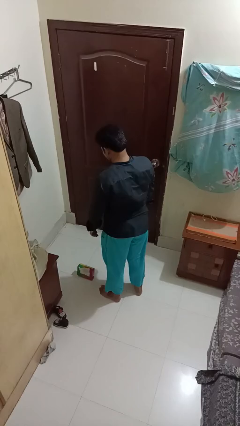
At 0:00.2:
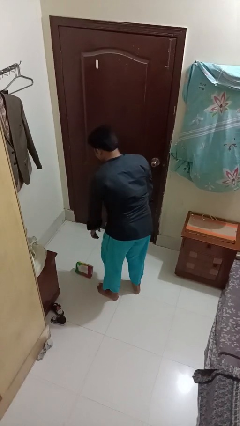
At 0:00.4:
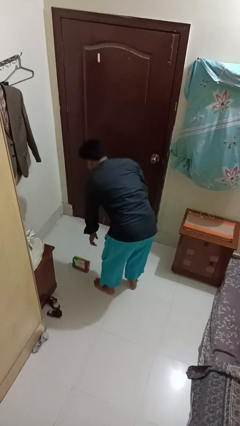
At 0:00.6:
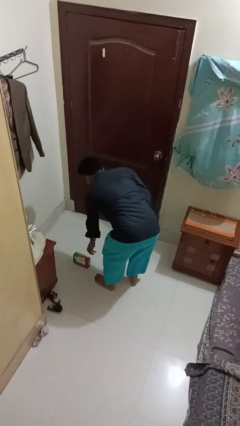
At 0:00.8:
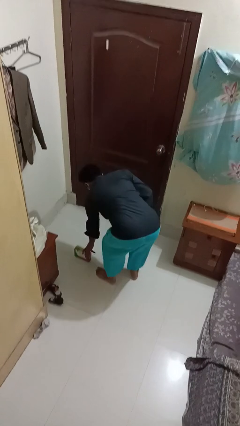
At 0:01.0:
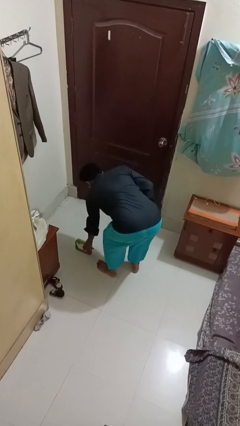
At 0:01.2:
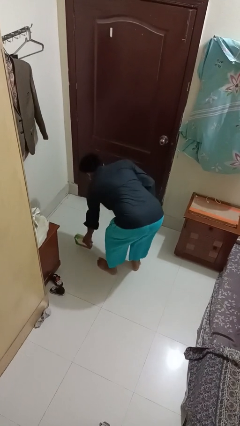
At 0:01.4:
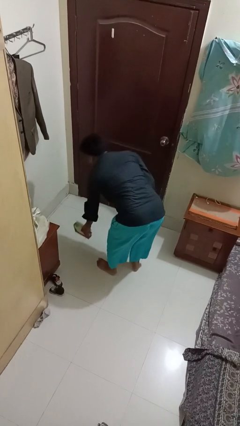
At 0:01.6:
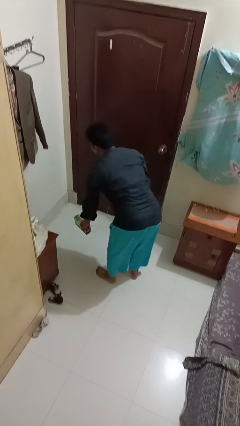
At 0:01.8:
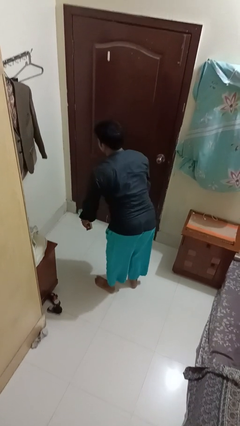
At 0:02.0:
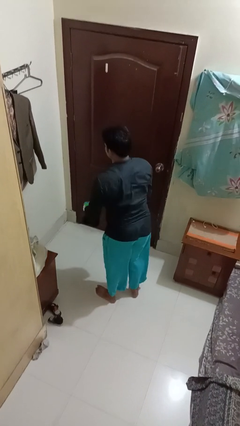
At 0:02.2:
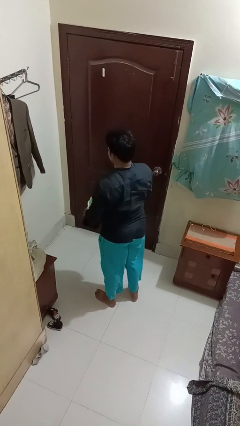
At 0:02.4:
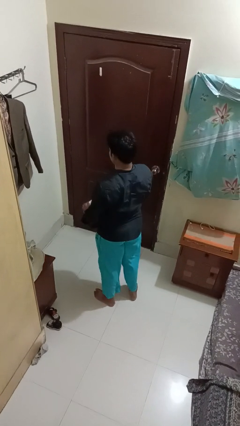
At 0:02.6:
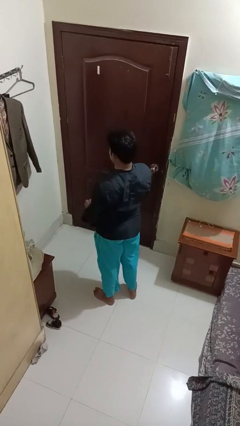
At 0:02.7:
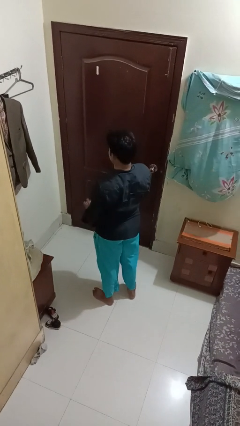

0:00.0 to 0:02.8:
person picks up object from floor

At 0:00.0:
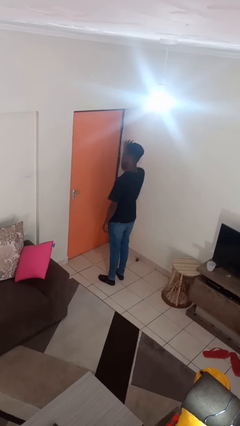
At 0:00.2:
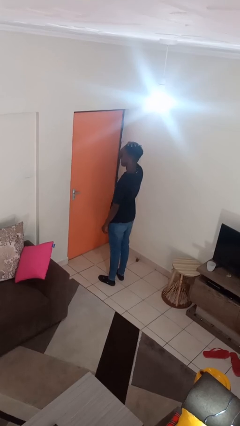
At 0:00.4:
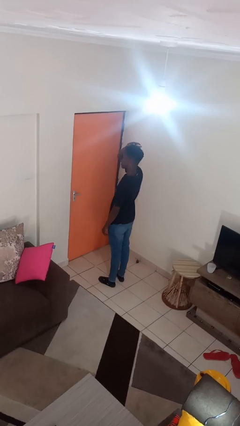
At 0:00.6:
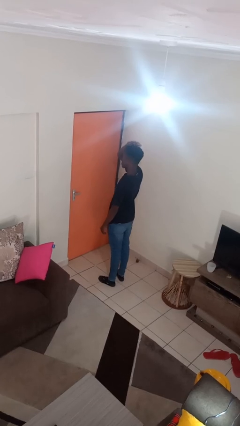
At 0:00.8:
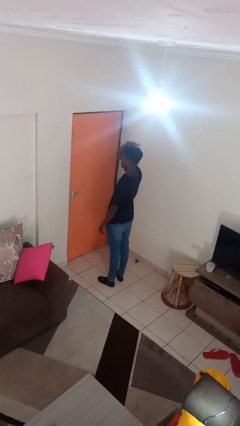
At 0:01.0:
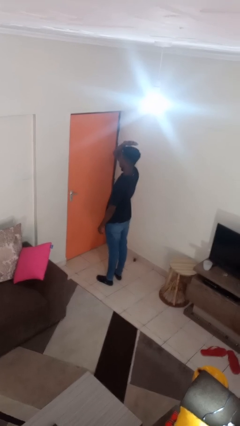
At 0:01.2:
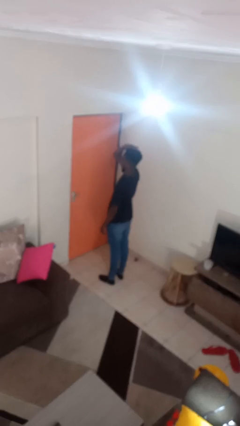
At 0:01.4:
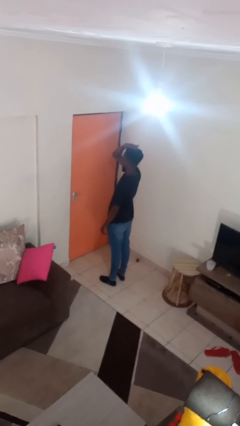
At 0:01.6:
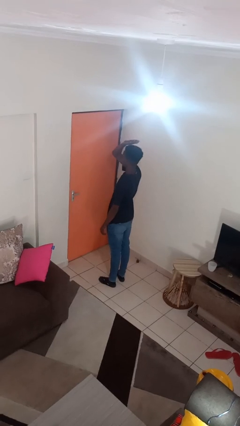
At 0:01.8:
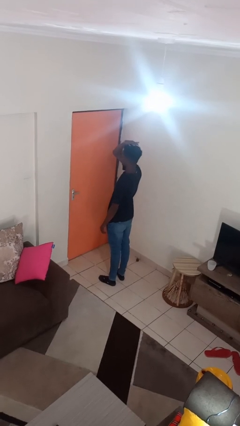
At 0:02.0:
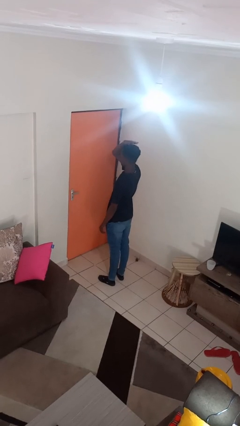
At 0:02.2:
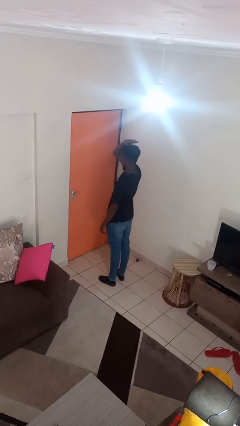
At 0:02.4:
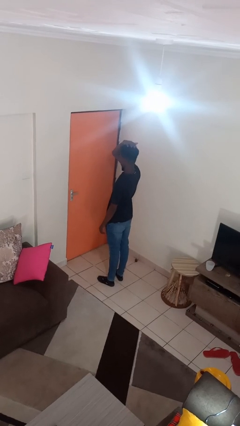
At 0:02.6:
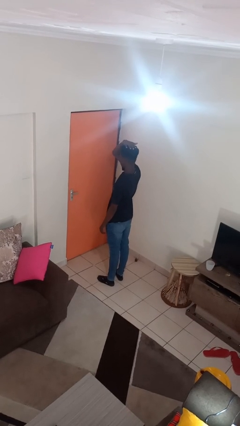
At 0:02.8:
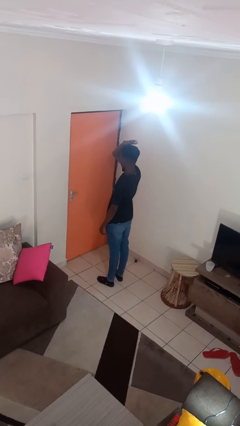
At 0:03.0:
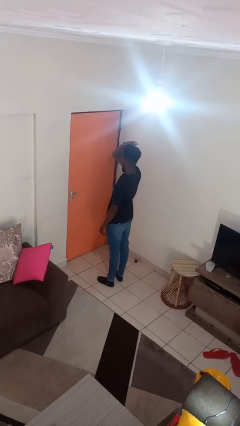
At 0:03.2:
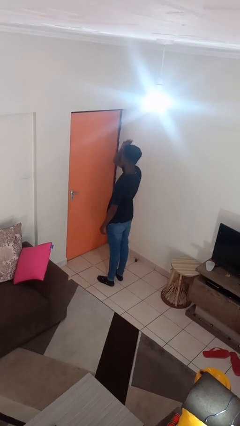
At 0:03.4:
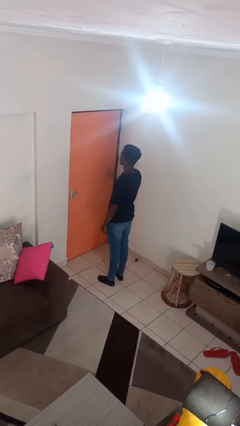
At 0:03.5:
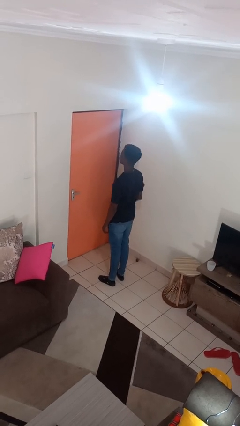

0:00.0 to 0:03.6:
person pats head

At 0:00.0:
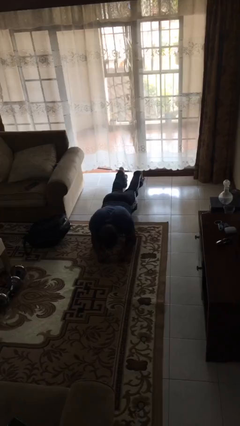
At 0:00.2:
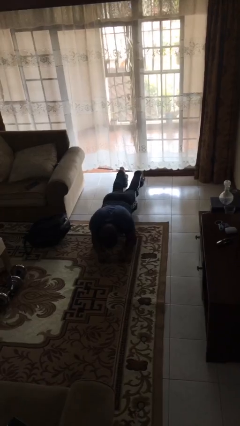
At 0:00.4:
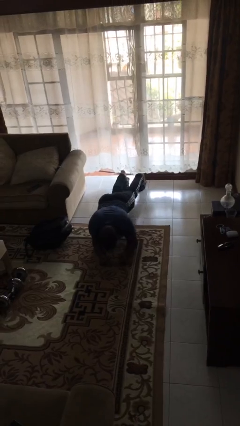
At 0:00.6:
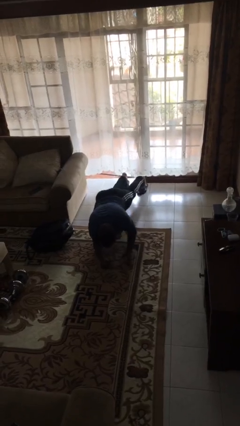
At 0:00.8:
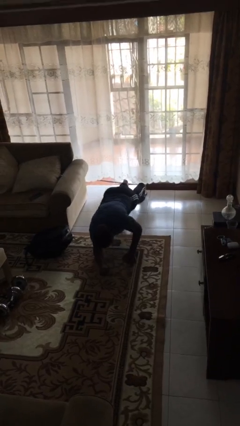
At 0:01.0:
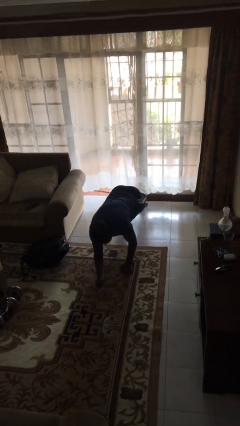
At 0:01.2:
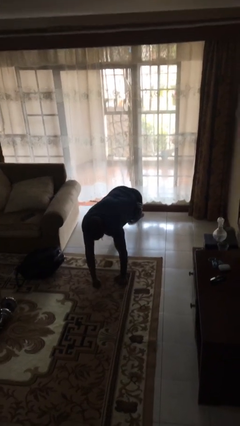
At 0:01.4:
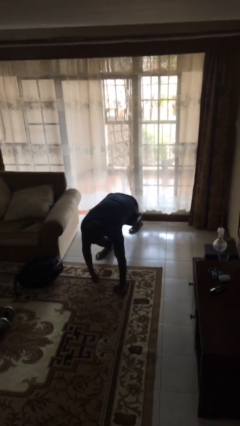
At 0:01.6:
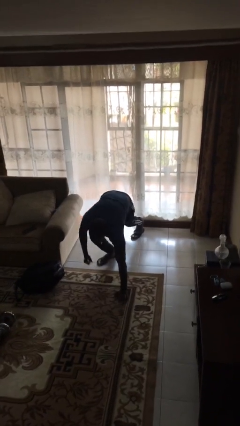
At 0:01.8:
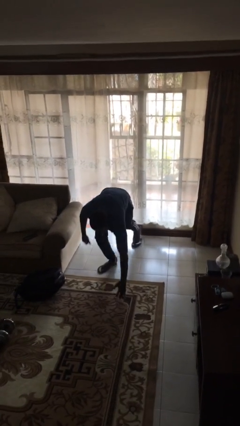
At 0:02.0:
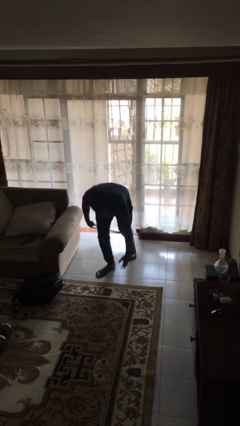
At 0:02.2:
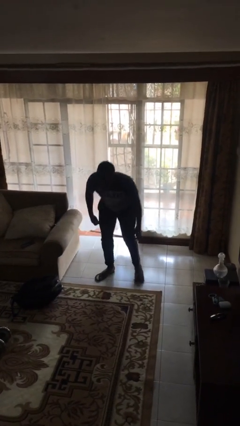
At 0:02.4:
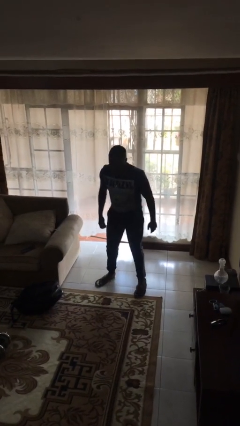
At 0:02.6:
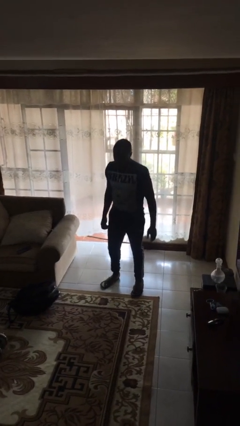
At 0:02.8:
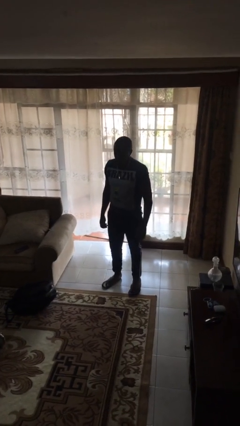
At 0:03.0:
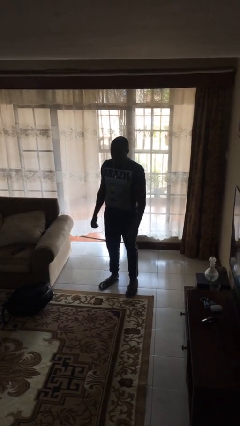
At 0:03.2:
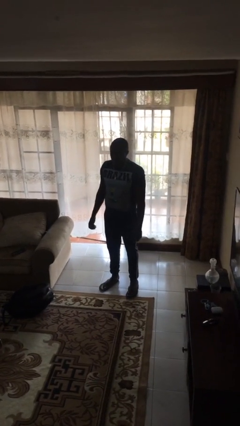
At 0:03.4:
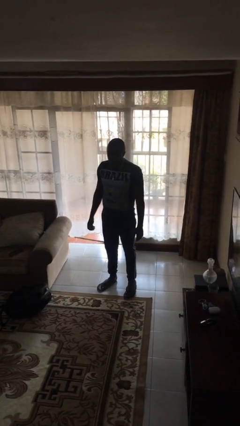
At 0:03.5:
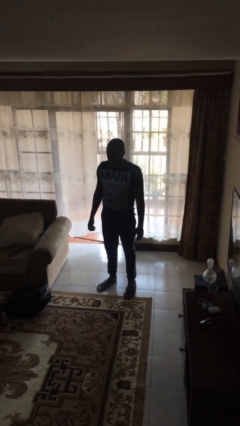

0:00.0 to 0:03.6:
person stands up from floor

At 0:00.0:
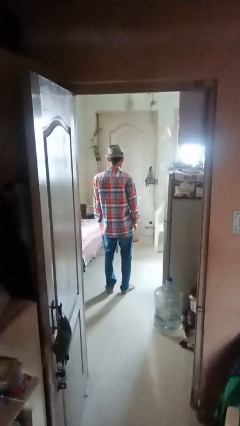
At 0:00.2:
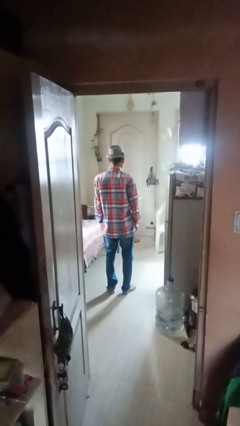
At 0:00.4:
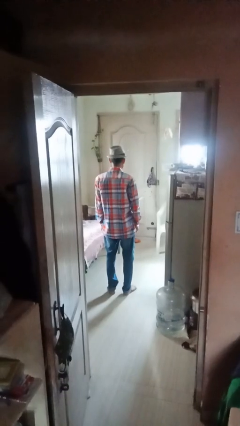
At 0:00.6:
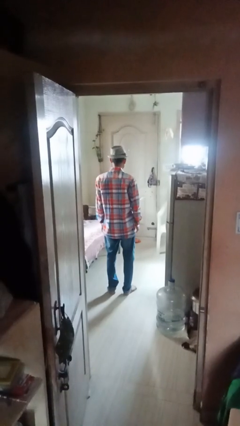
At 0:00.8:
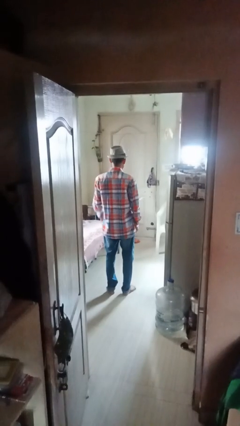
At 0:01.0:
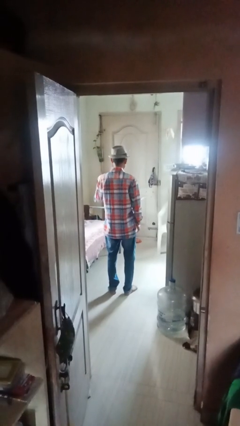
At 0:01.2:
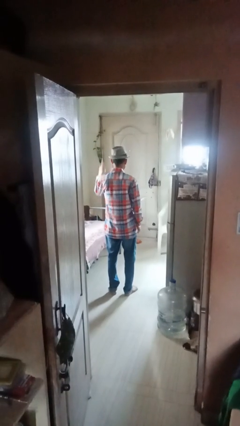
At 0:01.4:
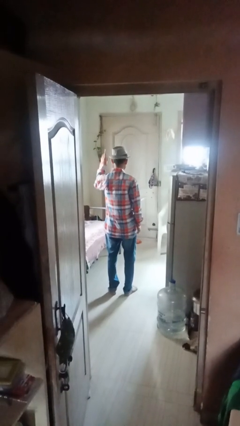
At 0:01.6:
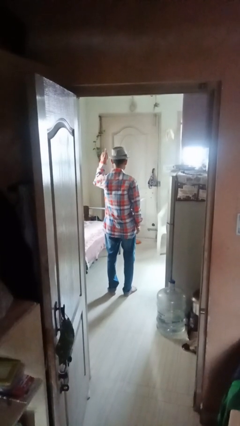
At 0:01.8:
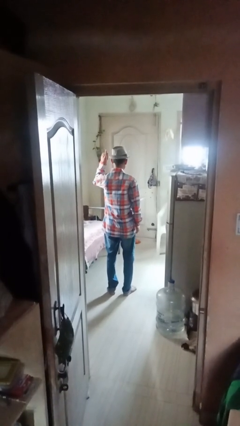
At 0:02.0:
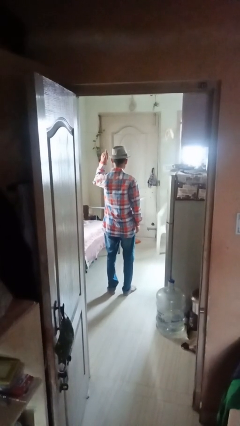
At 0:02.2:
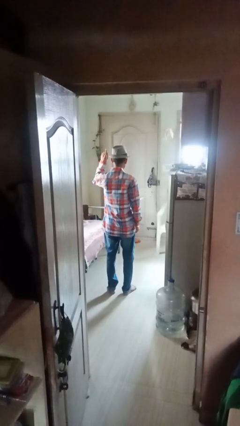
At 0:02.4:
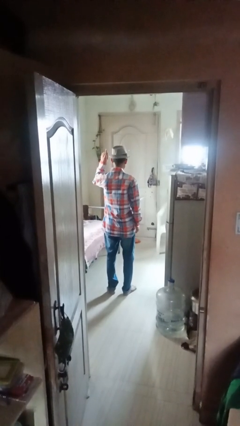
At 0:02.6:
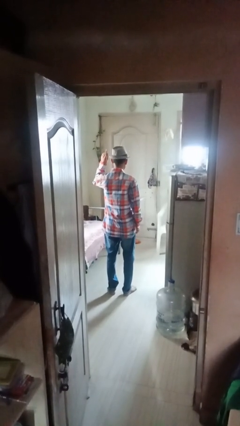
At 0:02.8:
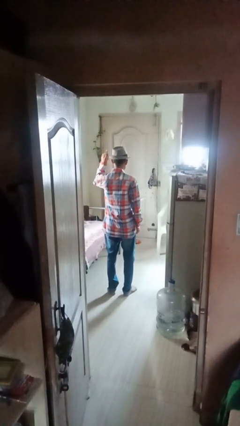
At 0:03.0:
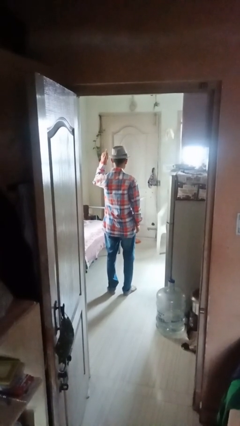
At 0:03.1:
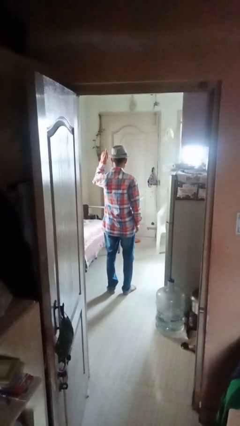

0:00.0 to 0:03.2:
person gestures number one

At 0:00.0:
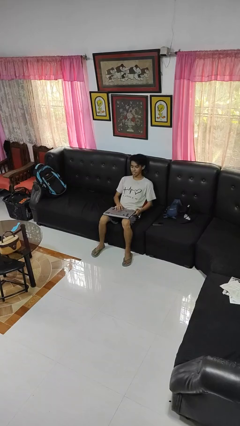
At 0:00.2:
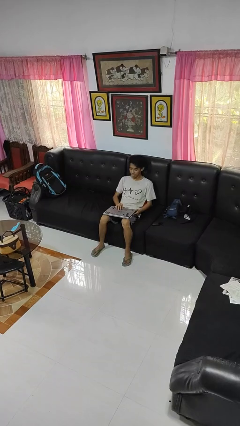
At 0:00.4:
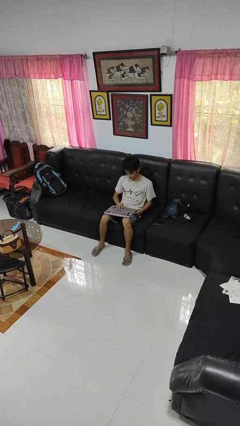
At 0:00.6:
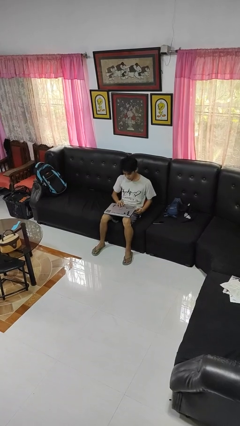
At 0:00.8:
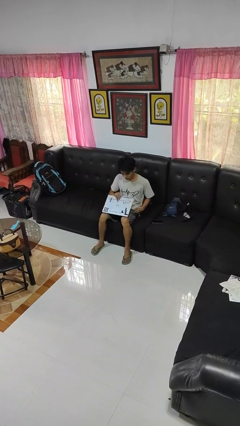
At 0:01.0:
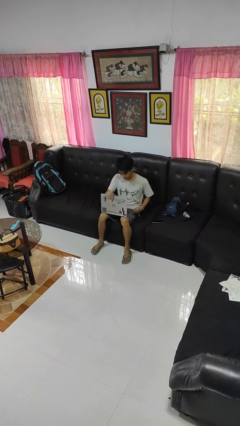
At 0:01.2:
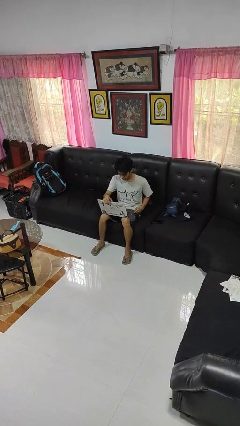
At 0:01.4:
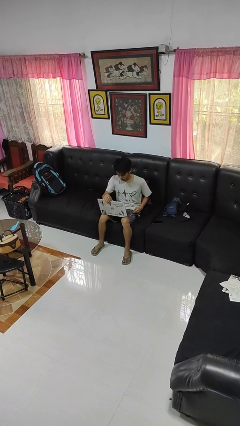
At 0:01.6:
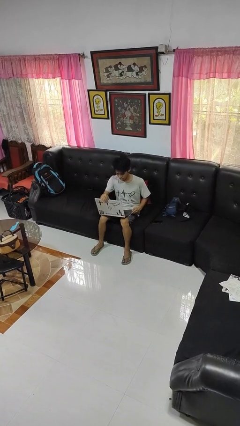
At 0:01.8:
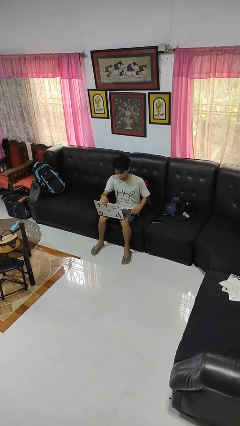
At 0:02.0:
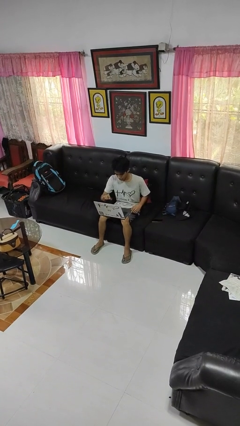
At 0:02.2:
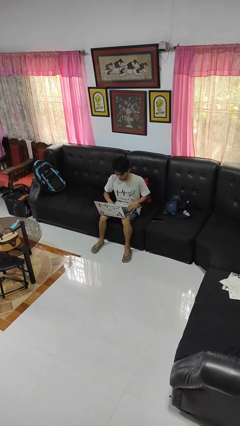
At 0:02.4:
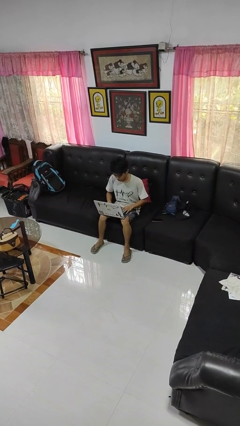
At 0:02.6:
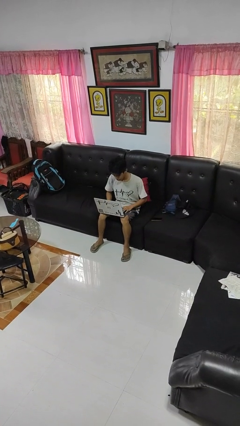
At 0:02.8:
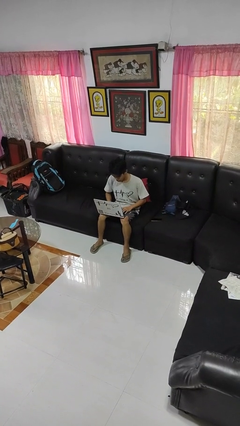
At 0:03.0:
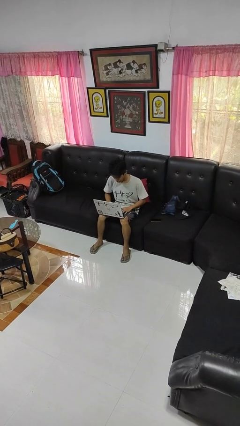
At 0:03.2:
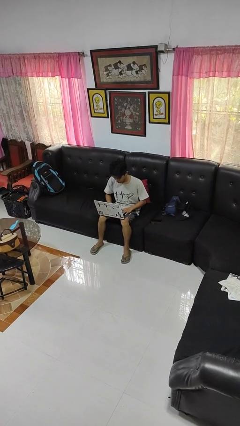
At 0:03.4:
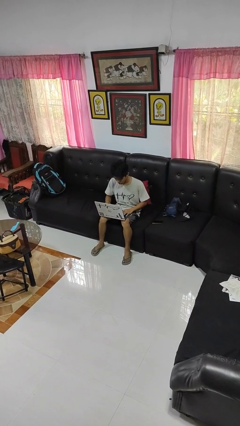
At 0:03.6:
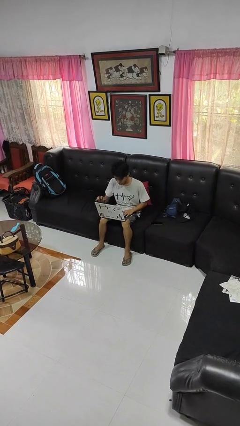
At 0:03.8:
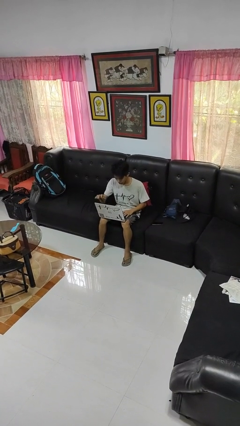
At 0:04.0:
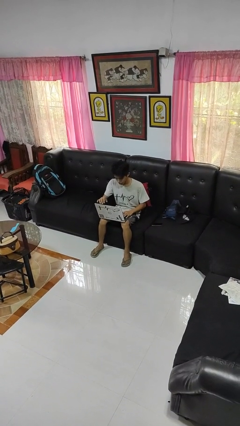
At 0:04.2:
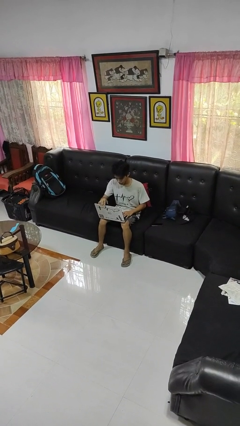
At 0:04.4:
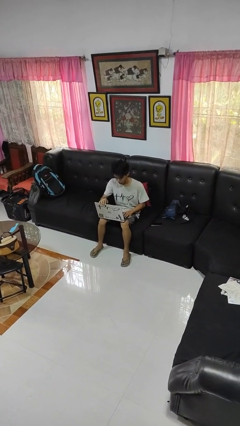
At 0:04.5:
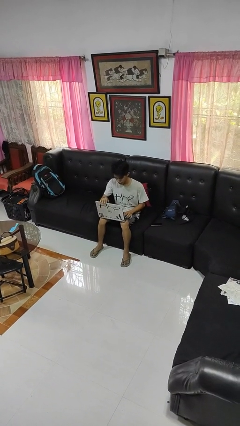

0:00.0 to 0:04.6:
person opens laptop
